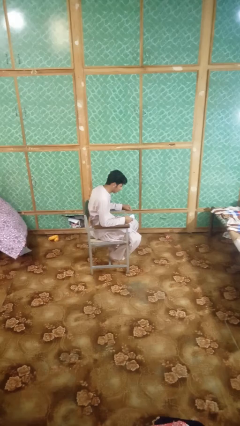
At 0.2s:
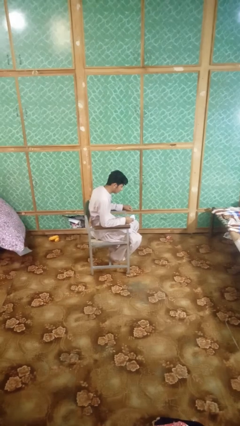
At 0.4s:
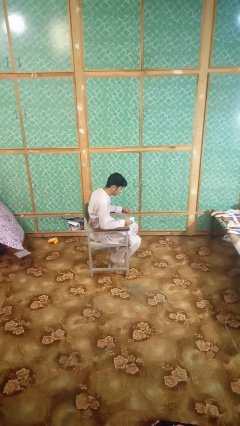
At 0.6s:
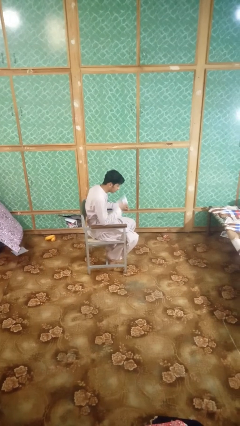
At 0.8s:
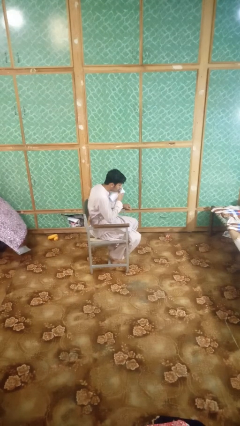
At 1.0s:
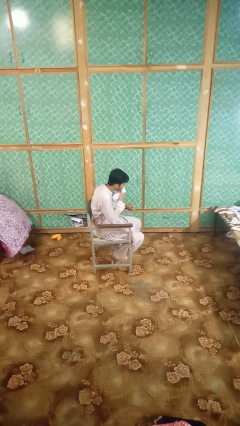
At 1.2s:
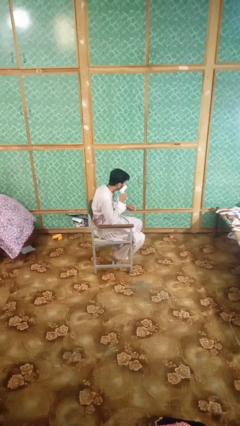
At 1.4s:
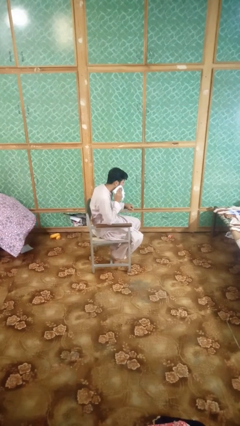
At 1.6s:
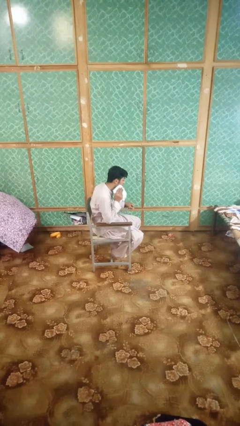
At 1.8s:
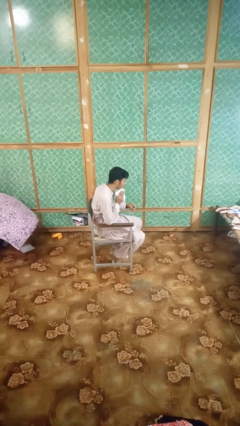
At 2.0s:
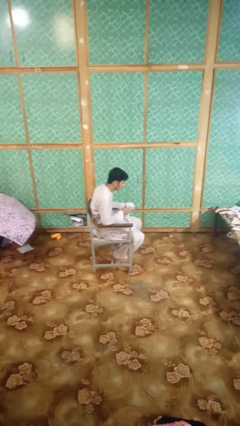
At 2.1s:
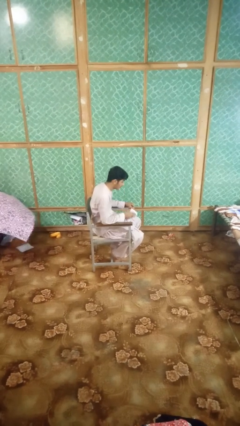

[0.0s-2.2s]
person wipes mouth with napkin

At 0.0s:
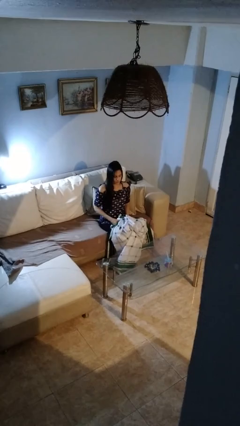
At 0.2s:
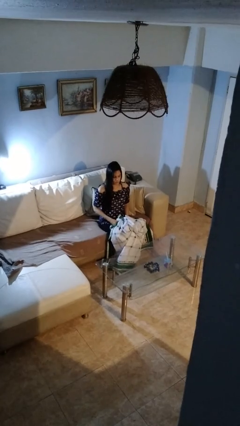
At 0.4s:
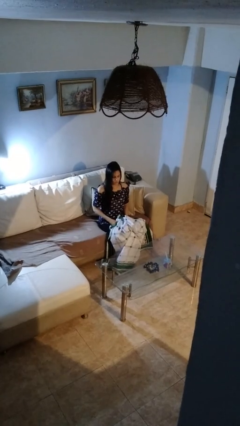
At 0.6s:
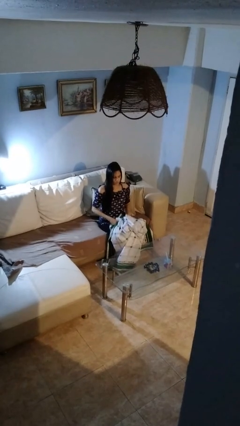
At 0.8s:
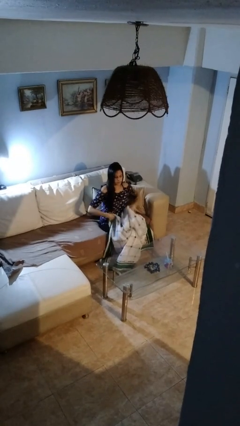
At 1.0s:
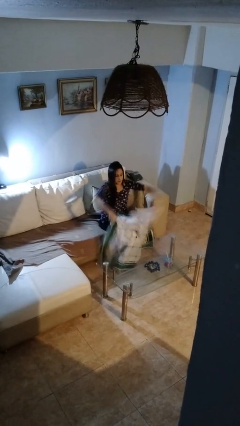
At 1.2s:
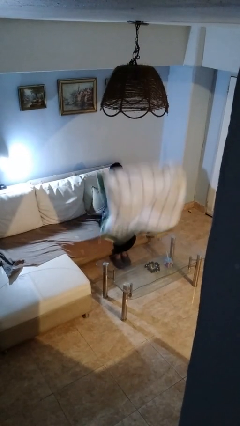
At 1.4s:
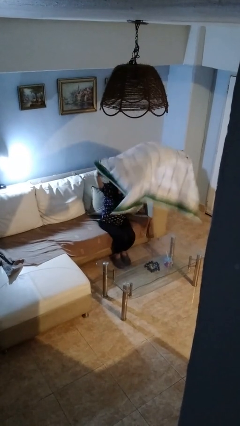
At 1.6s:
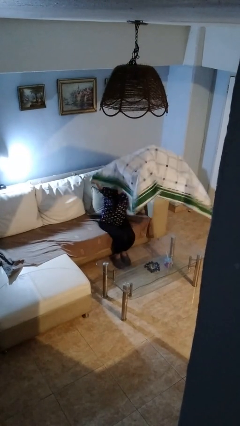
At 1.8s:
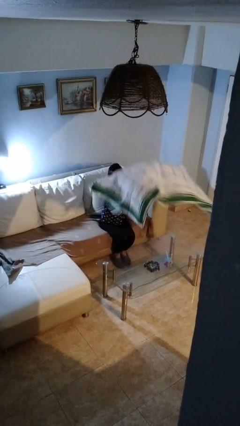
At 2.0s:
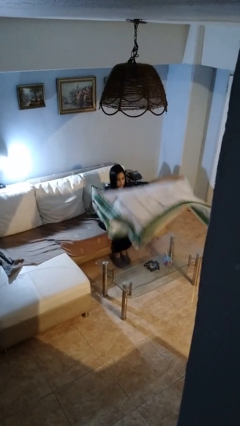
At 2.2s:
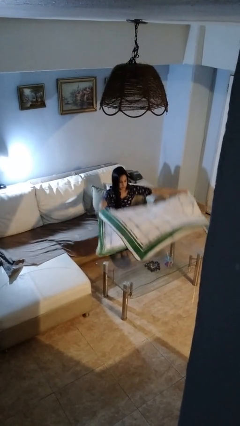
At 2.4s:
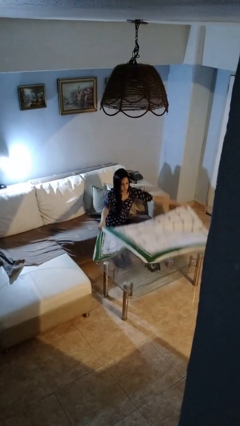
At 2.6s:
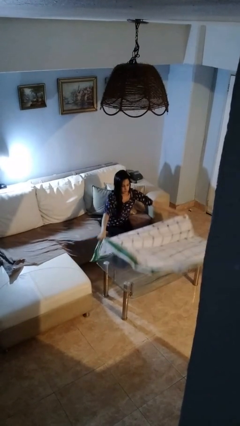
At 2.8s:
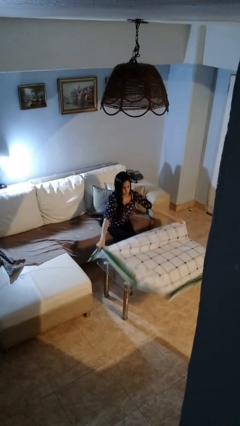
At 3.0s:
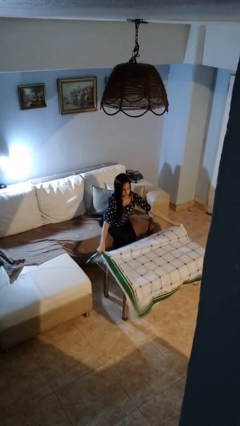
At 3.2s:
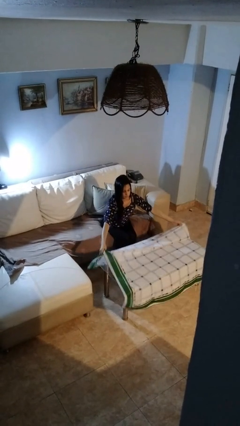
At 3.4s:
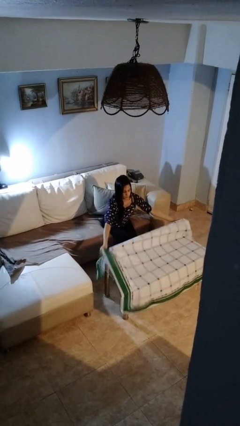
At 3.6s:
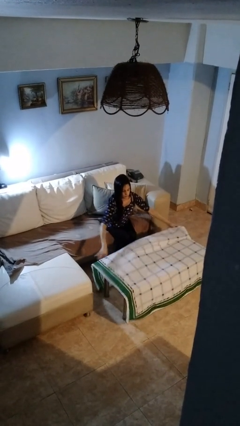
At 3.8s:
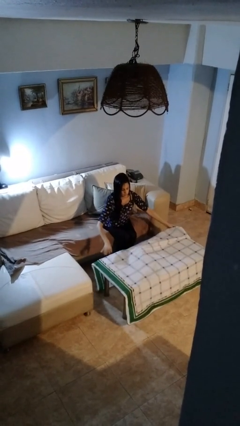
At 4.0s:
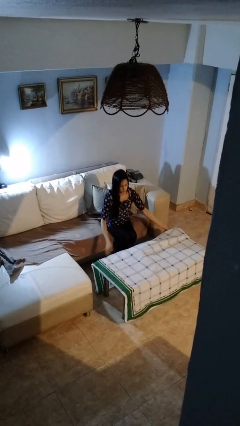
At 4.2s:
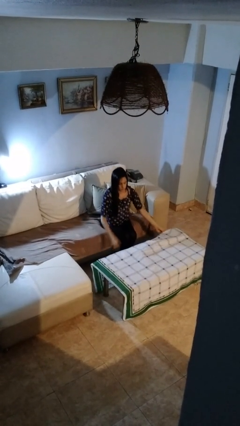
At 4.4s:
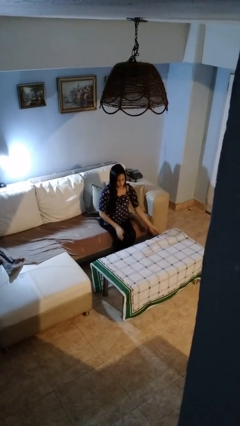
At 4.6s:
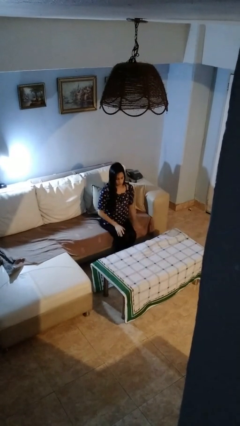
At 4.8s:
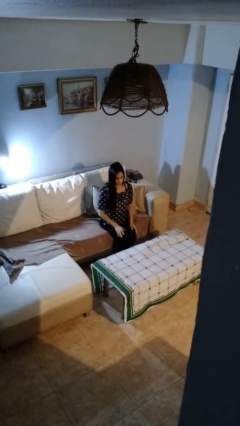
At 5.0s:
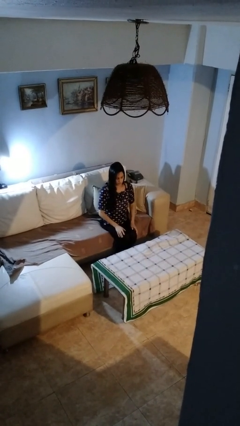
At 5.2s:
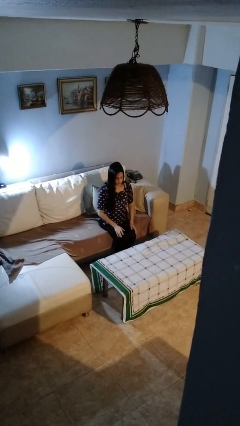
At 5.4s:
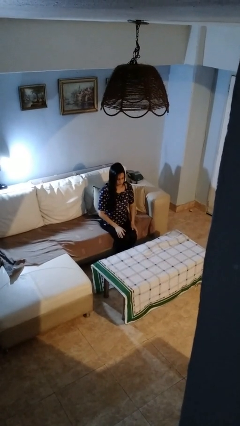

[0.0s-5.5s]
person spreads tablecloth

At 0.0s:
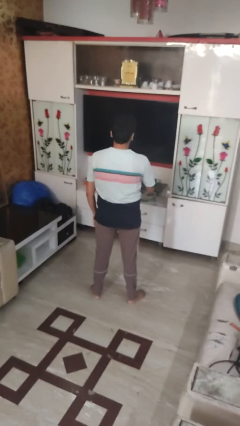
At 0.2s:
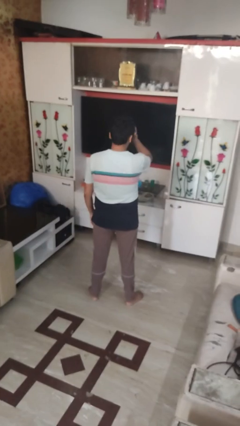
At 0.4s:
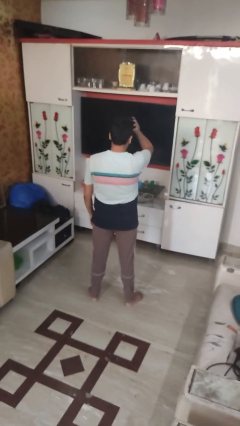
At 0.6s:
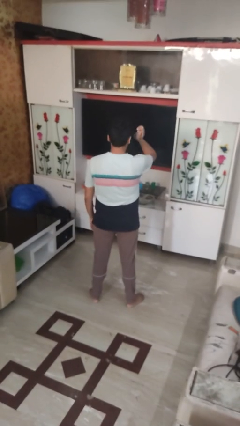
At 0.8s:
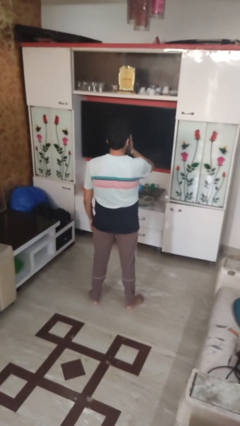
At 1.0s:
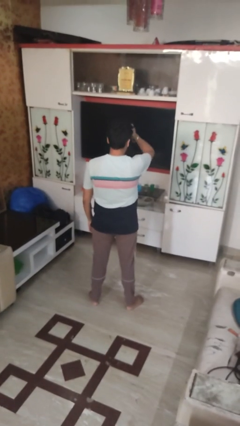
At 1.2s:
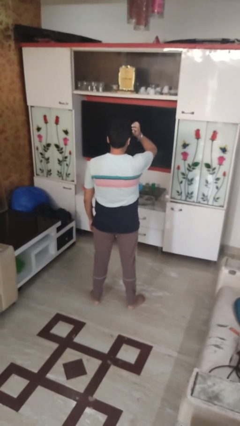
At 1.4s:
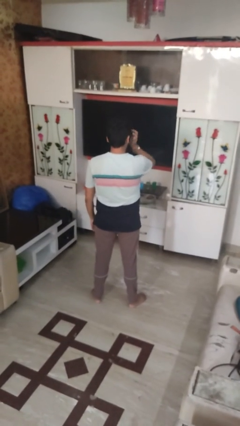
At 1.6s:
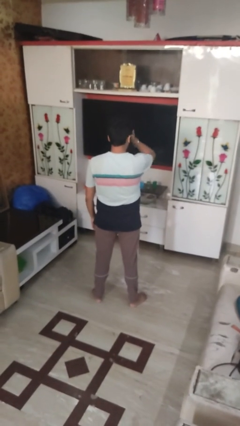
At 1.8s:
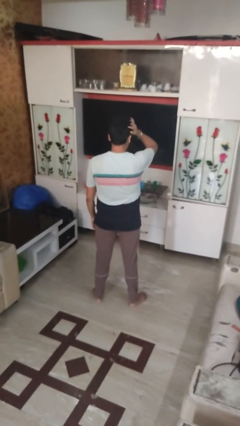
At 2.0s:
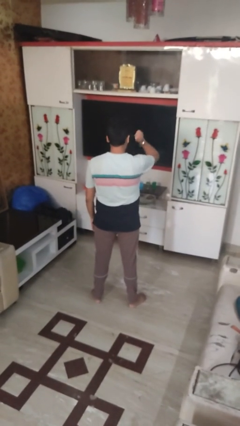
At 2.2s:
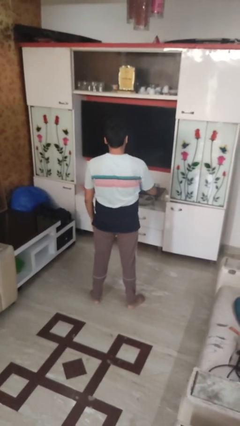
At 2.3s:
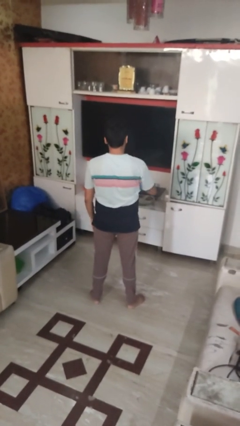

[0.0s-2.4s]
person strokes hair

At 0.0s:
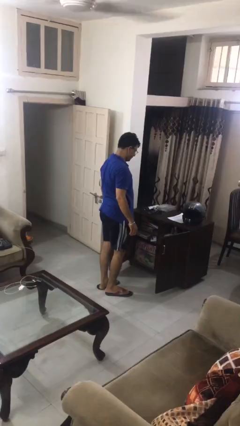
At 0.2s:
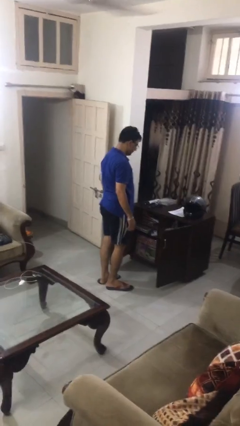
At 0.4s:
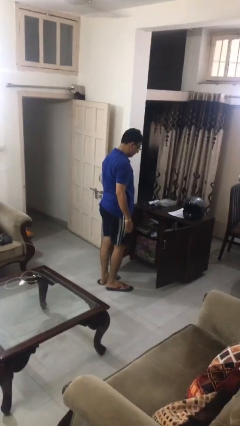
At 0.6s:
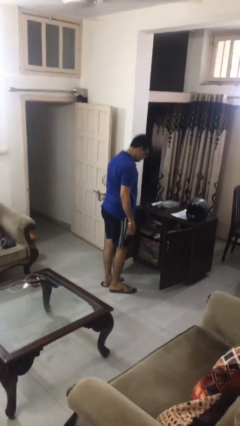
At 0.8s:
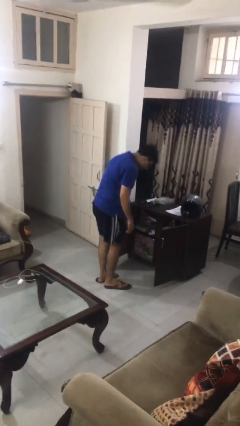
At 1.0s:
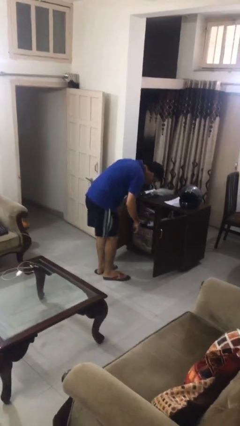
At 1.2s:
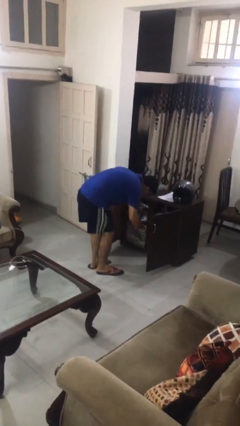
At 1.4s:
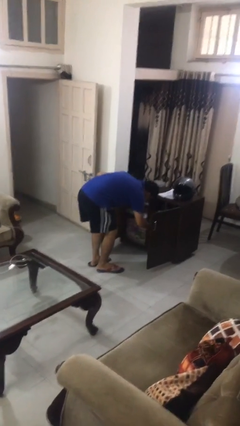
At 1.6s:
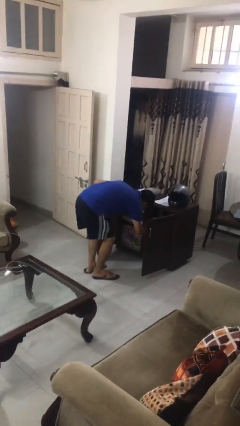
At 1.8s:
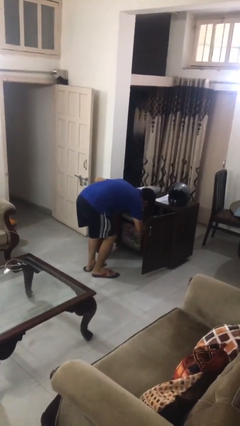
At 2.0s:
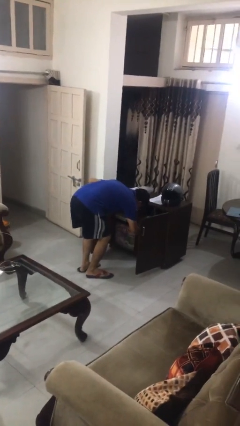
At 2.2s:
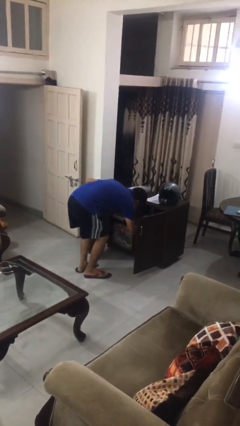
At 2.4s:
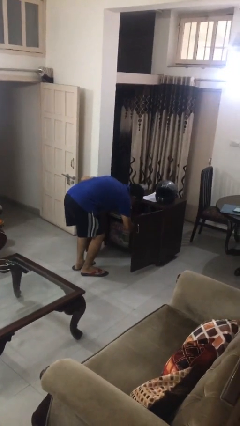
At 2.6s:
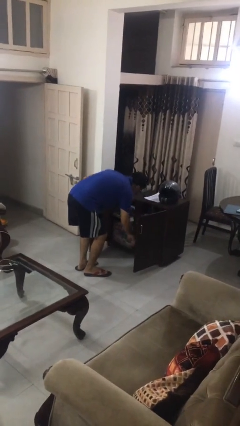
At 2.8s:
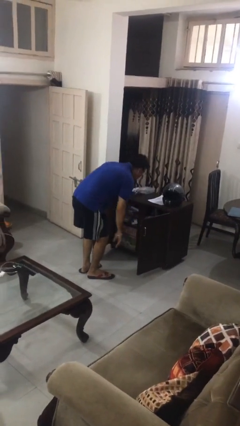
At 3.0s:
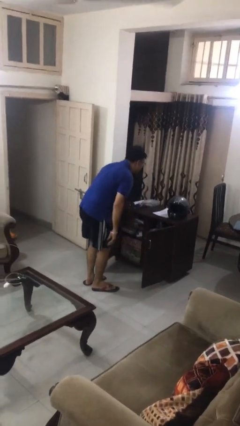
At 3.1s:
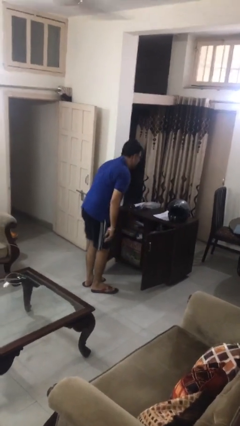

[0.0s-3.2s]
person searches in cabinet

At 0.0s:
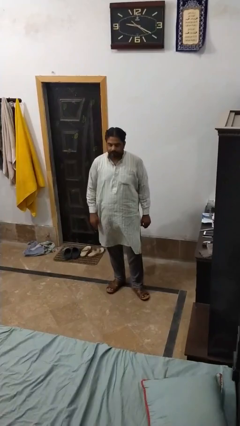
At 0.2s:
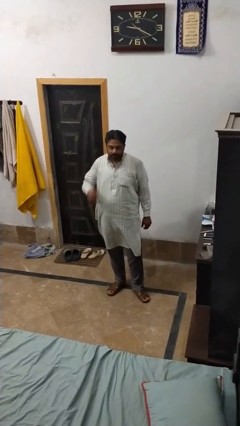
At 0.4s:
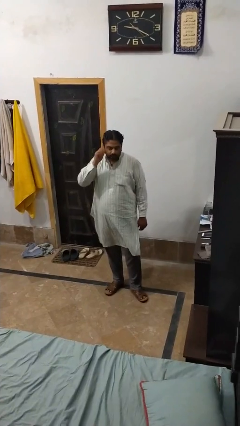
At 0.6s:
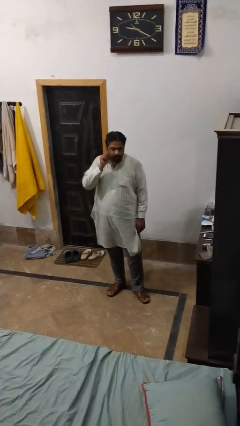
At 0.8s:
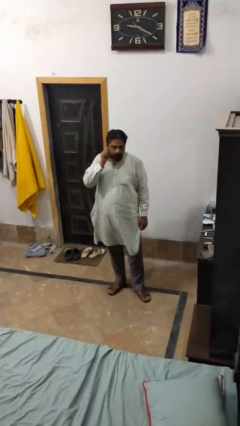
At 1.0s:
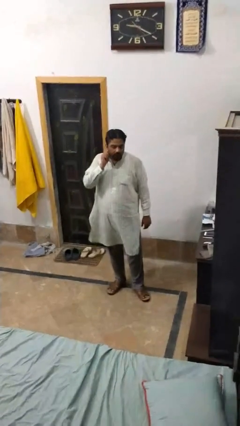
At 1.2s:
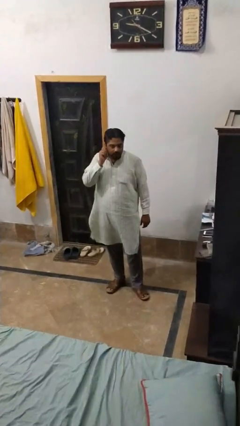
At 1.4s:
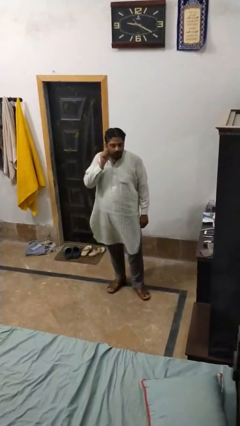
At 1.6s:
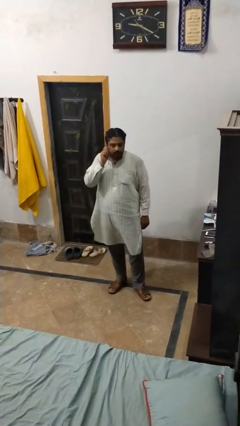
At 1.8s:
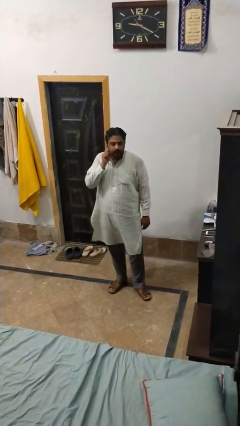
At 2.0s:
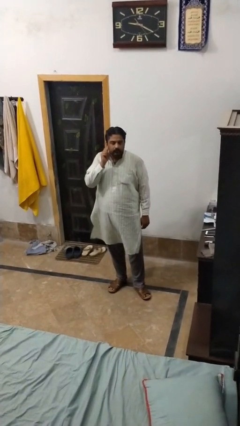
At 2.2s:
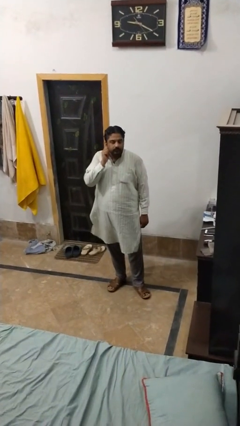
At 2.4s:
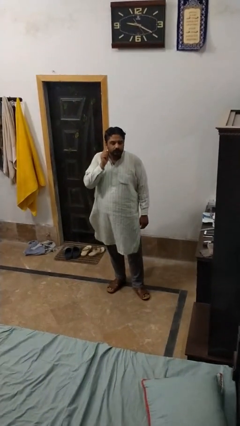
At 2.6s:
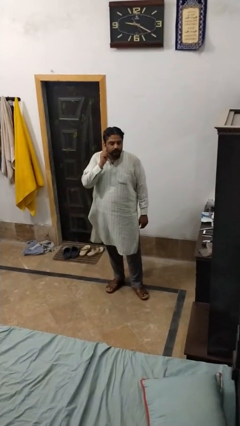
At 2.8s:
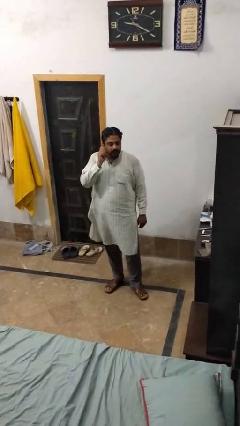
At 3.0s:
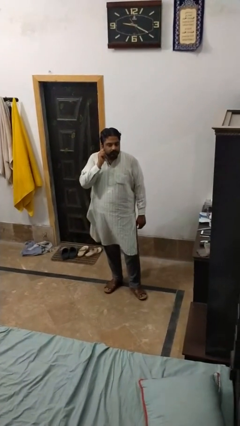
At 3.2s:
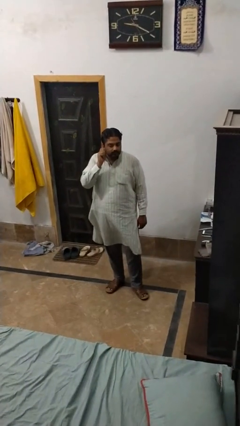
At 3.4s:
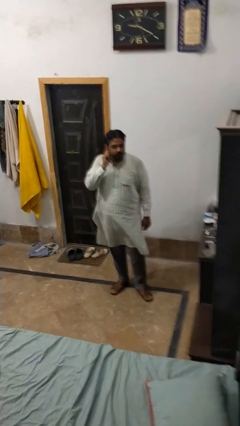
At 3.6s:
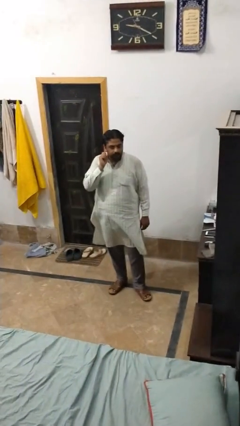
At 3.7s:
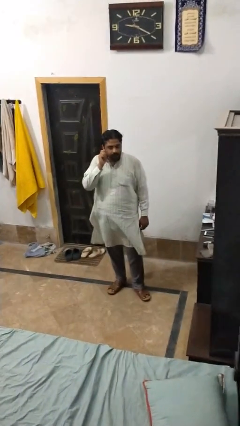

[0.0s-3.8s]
person touches earlobe

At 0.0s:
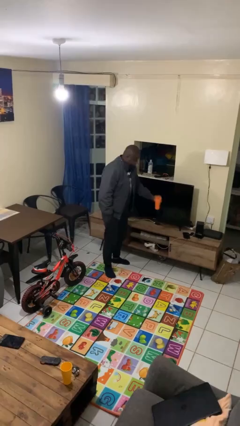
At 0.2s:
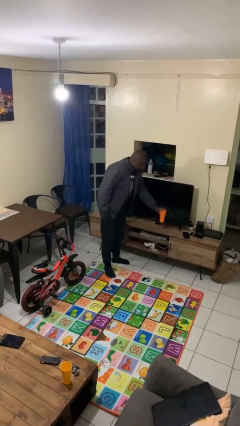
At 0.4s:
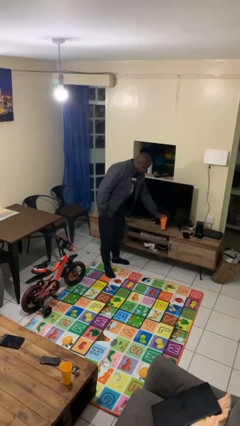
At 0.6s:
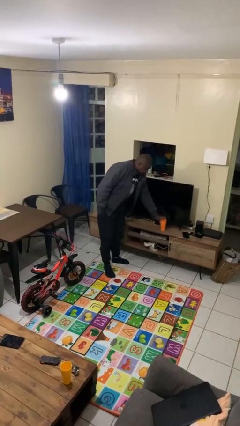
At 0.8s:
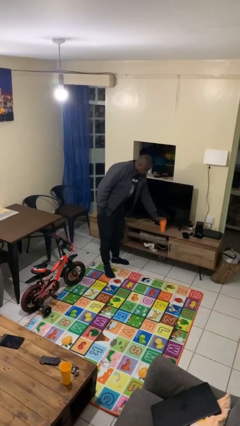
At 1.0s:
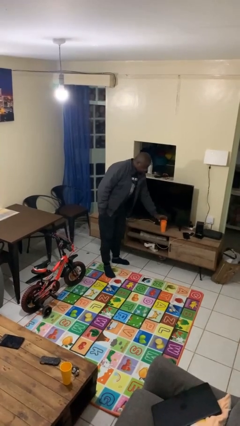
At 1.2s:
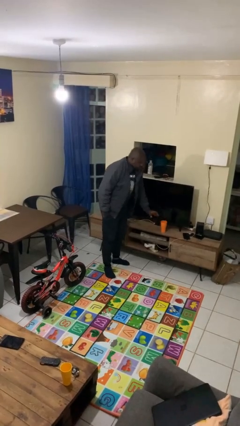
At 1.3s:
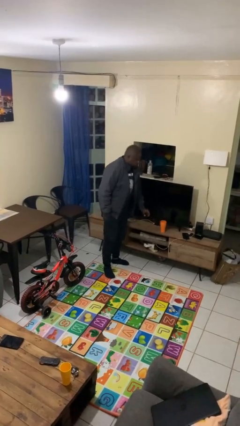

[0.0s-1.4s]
person puts down object on countertop
